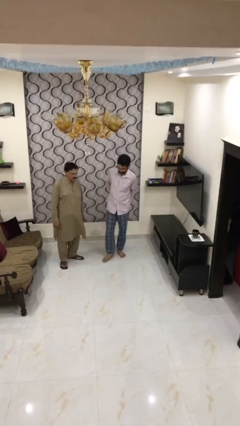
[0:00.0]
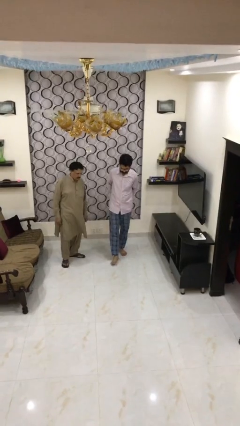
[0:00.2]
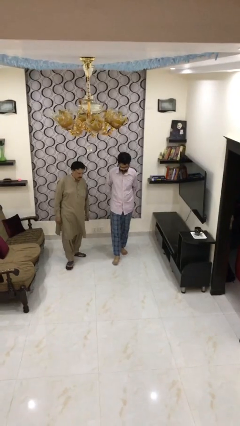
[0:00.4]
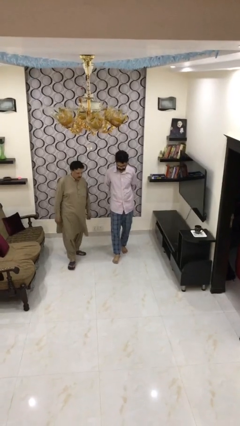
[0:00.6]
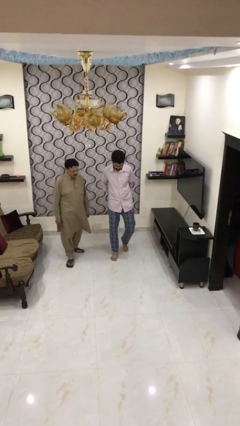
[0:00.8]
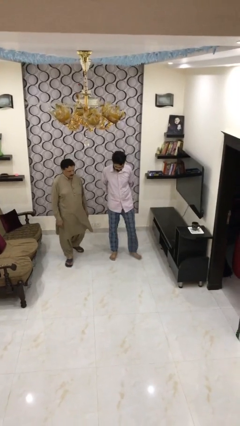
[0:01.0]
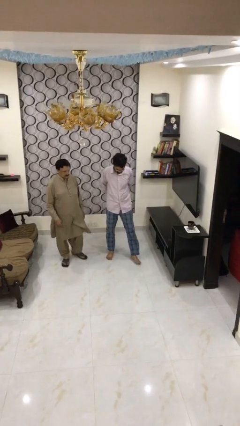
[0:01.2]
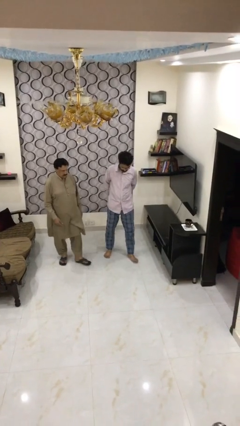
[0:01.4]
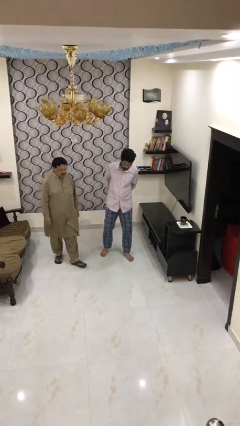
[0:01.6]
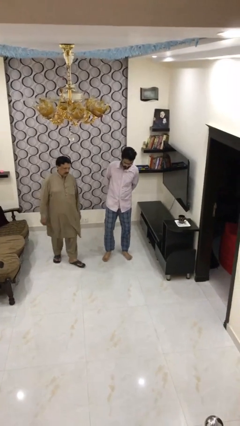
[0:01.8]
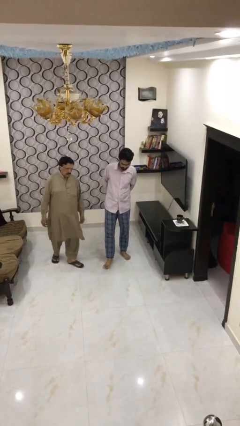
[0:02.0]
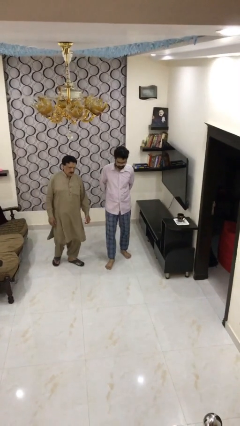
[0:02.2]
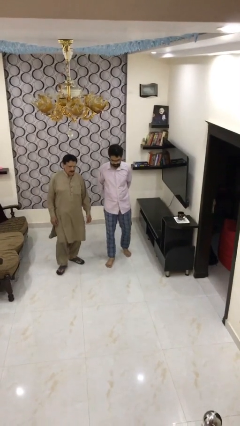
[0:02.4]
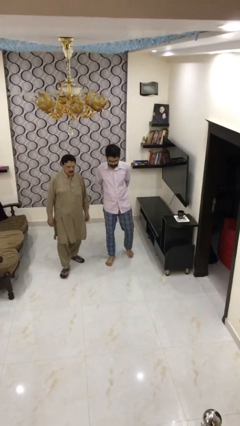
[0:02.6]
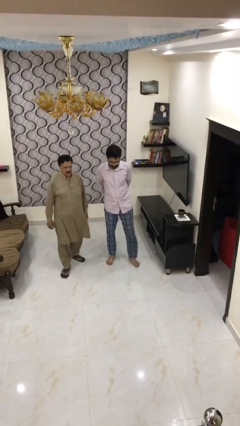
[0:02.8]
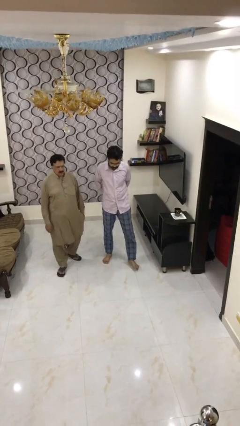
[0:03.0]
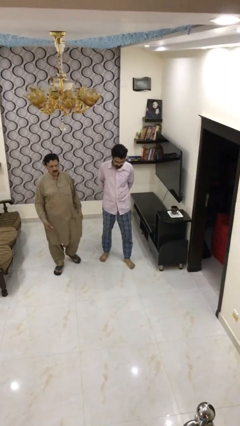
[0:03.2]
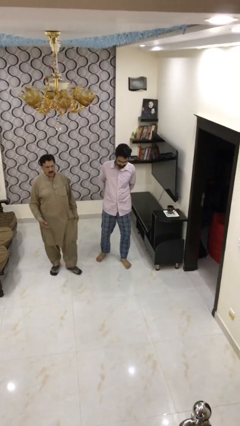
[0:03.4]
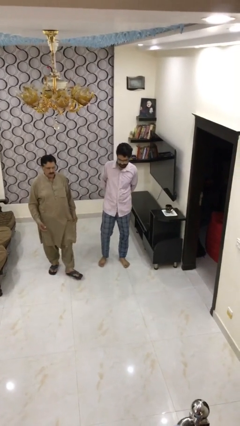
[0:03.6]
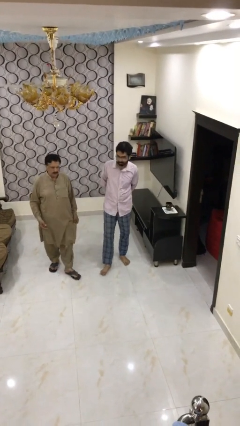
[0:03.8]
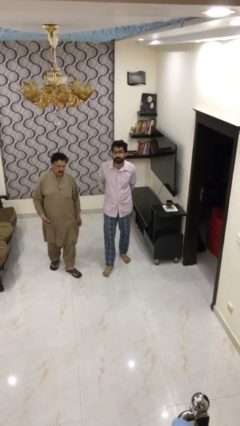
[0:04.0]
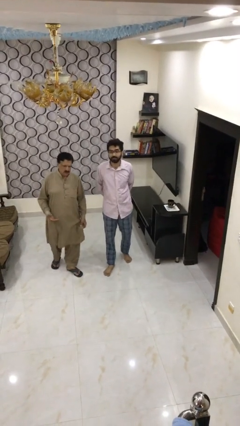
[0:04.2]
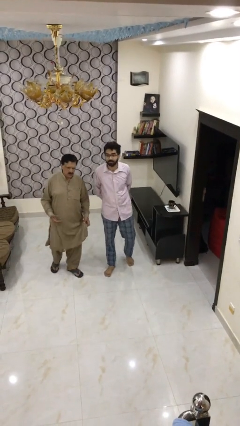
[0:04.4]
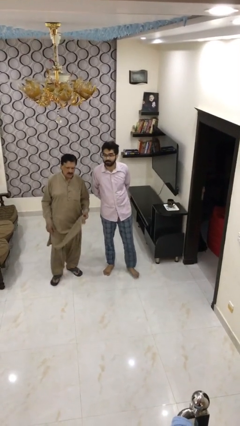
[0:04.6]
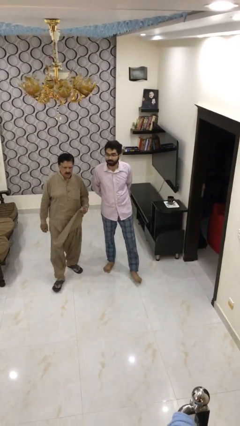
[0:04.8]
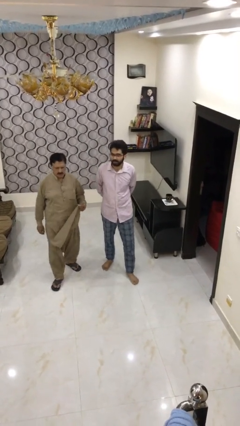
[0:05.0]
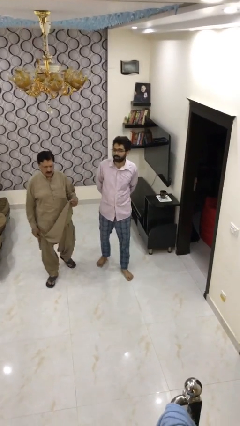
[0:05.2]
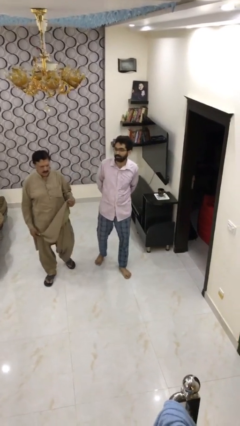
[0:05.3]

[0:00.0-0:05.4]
person talks to person

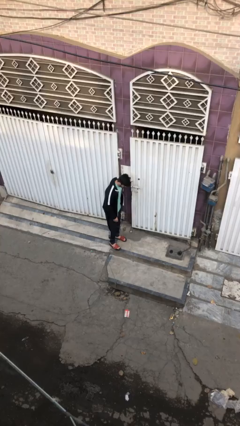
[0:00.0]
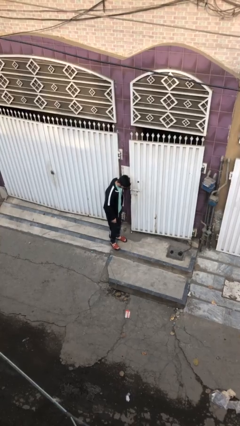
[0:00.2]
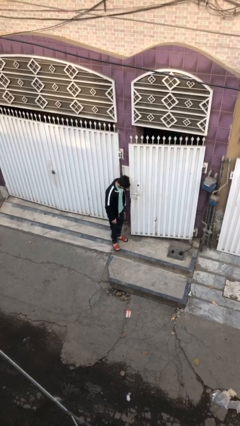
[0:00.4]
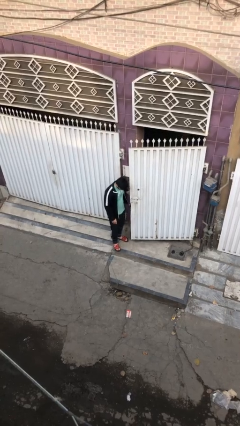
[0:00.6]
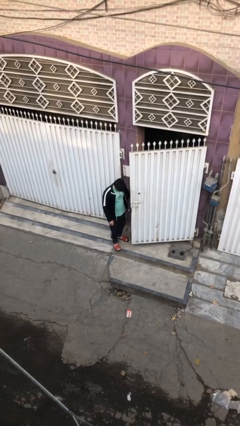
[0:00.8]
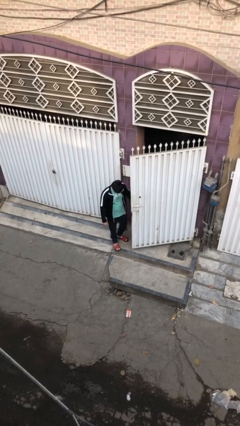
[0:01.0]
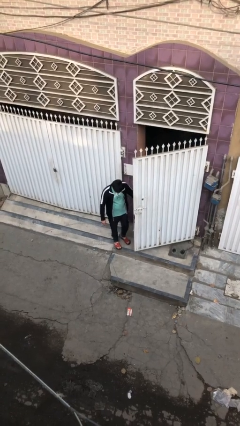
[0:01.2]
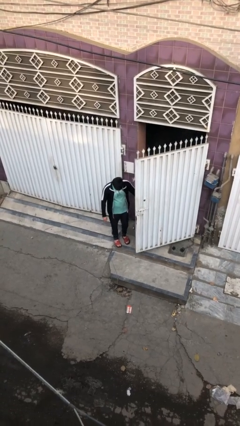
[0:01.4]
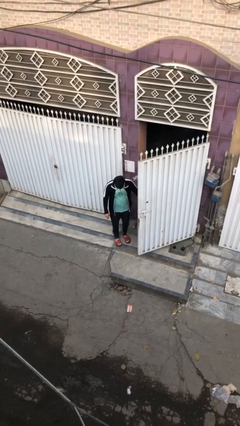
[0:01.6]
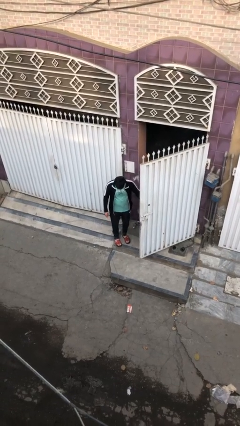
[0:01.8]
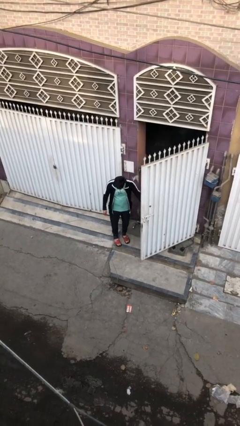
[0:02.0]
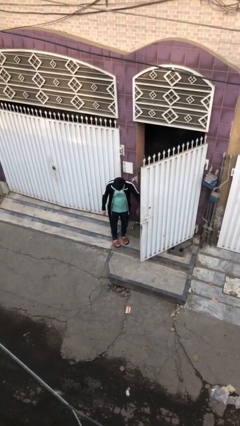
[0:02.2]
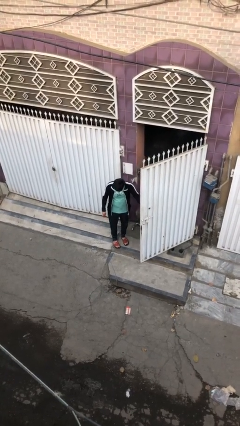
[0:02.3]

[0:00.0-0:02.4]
person opens facility door

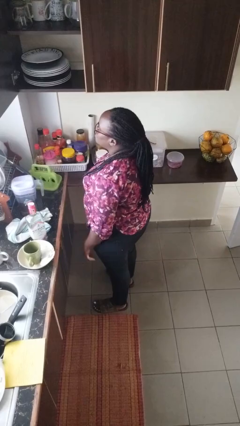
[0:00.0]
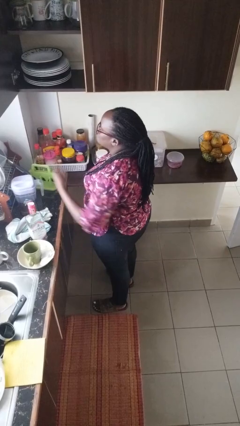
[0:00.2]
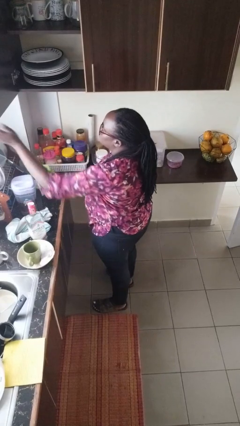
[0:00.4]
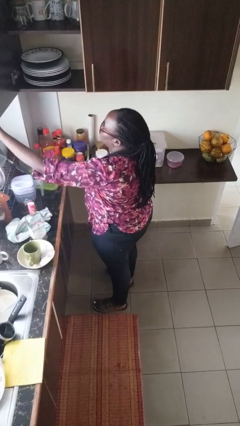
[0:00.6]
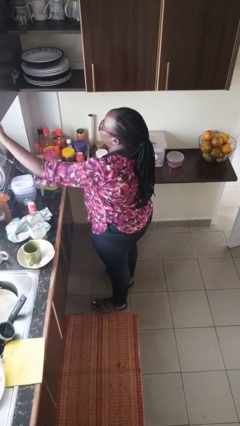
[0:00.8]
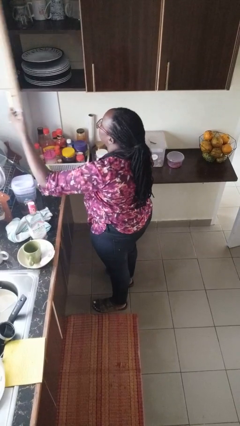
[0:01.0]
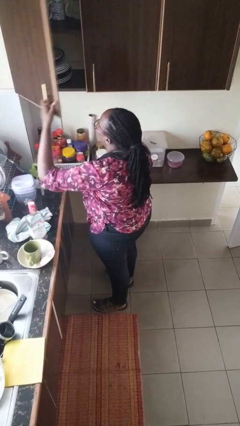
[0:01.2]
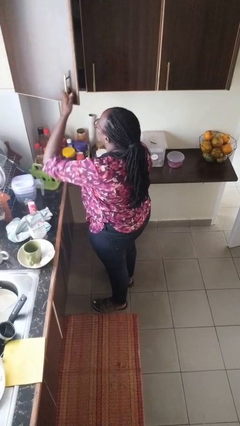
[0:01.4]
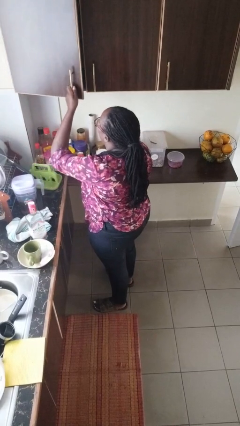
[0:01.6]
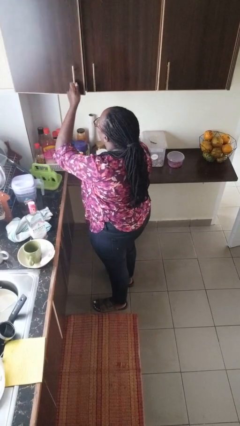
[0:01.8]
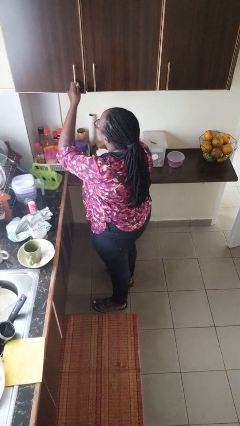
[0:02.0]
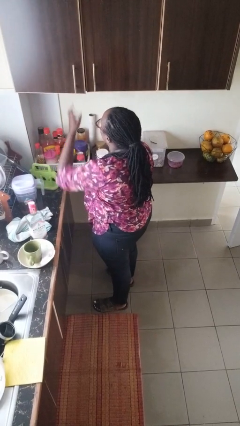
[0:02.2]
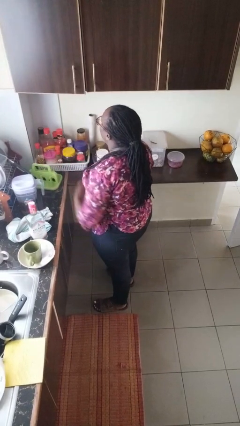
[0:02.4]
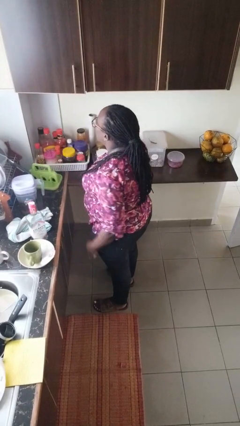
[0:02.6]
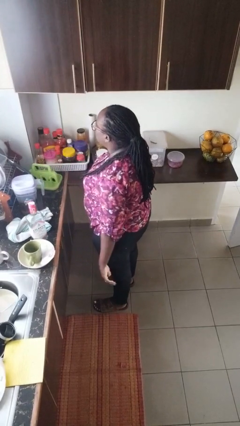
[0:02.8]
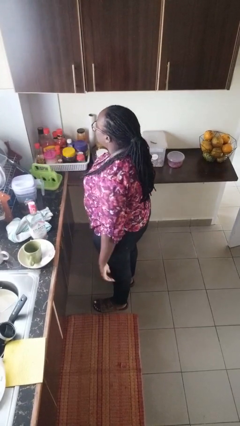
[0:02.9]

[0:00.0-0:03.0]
person closes cabinet

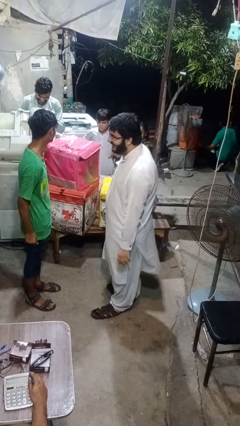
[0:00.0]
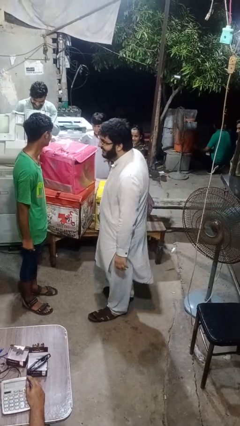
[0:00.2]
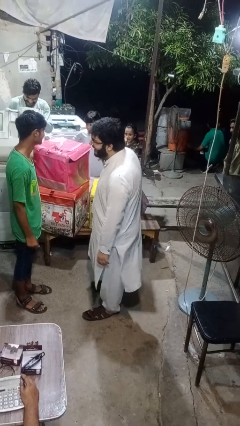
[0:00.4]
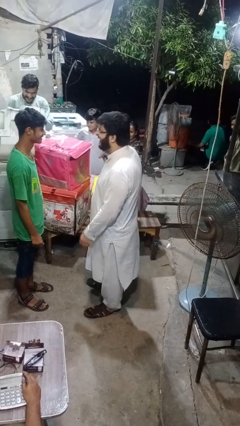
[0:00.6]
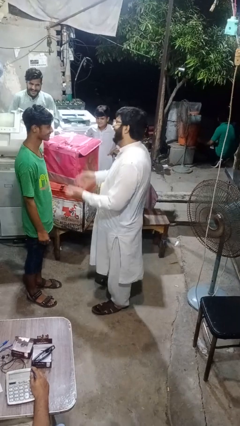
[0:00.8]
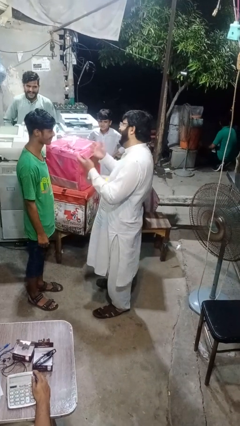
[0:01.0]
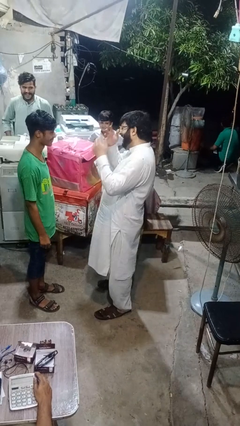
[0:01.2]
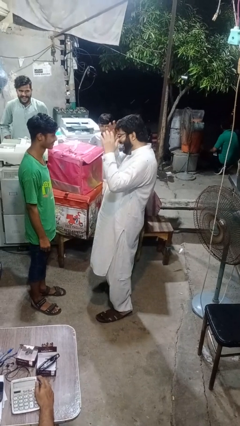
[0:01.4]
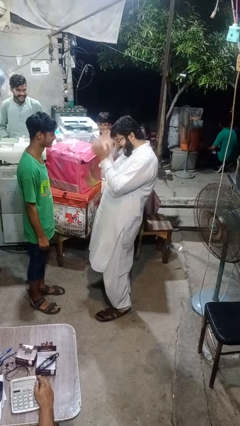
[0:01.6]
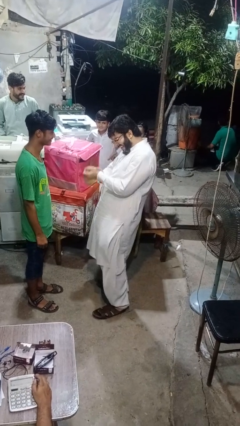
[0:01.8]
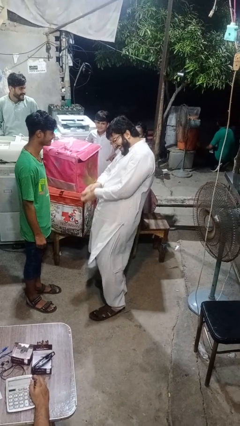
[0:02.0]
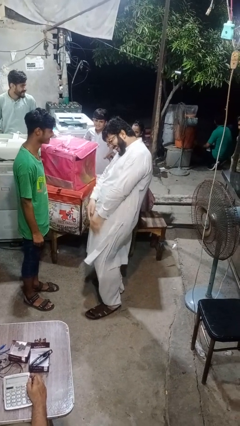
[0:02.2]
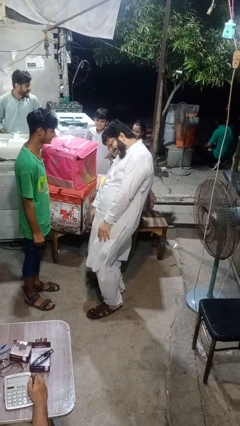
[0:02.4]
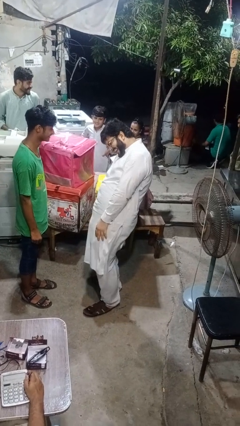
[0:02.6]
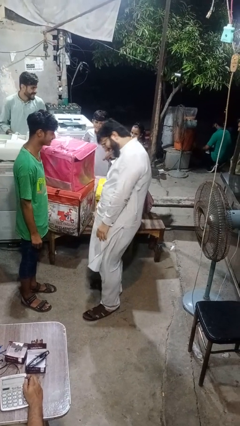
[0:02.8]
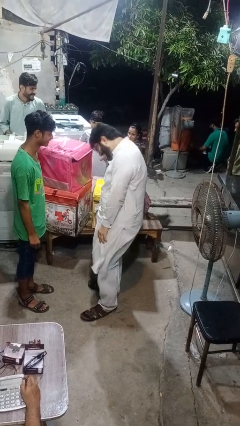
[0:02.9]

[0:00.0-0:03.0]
person laughs with person

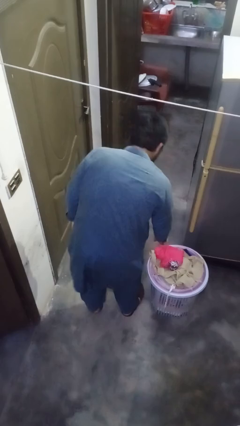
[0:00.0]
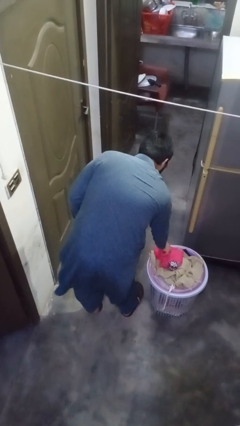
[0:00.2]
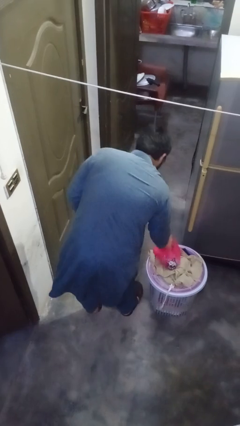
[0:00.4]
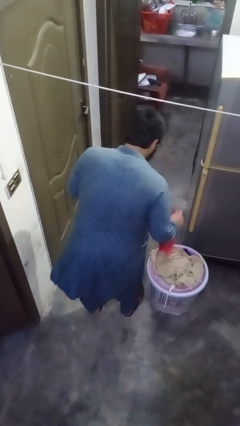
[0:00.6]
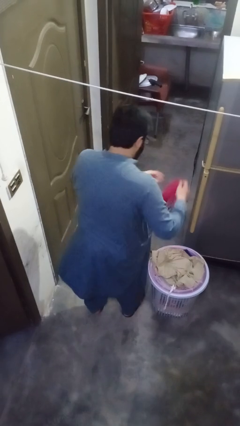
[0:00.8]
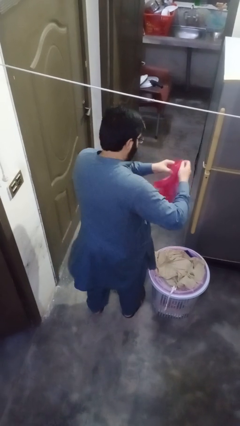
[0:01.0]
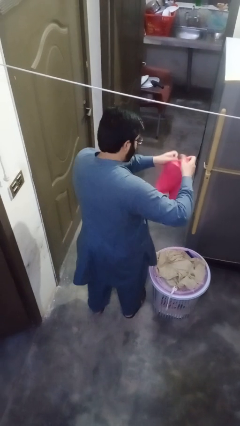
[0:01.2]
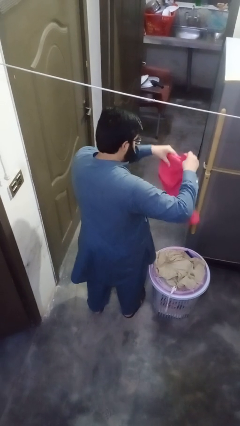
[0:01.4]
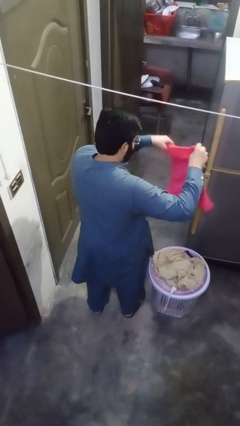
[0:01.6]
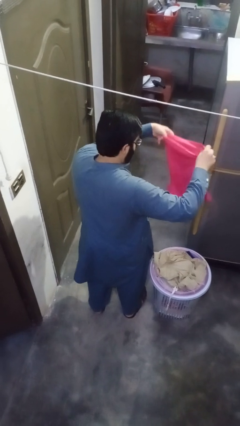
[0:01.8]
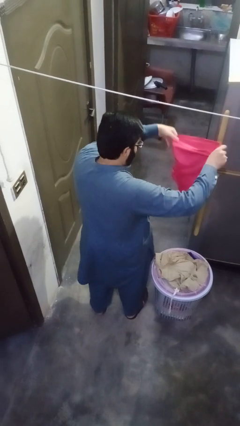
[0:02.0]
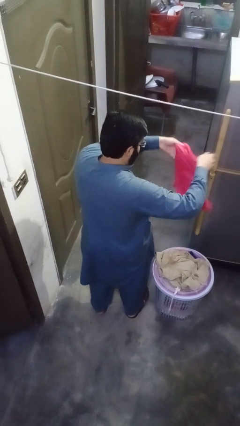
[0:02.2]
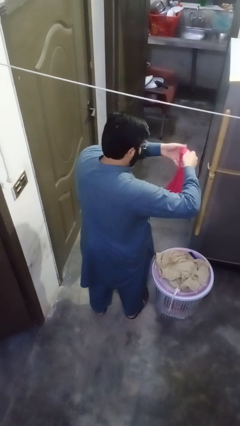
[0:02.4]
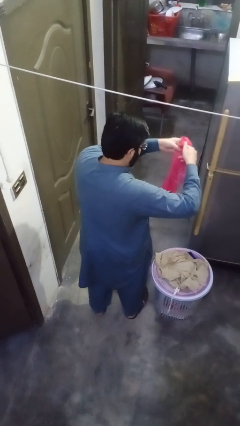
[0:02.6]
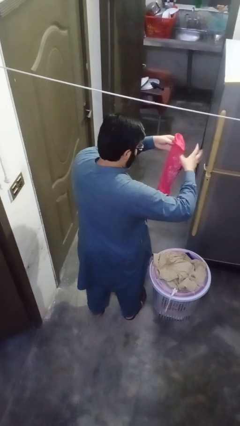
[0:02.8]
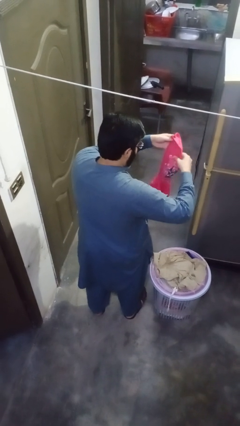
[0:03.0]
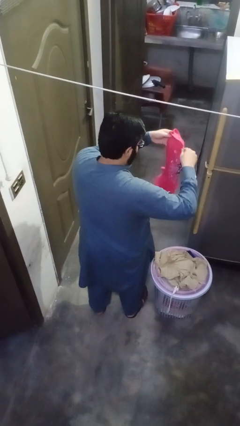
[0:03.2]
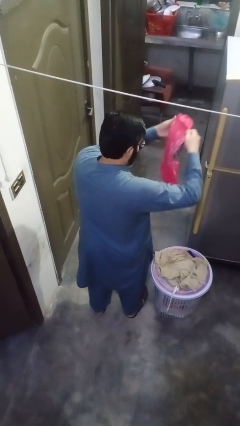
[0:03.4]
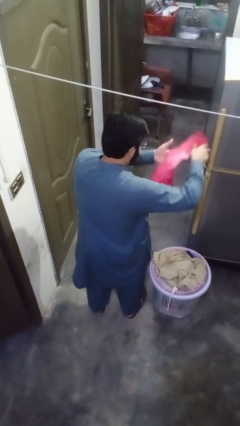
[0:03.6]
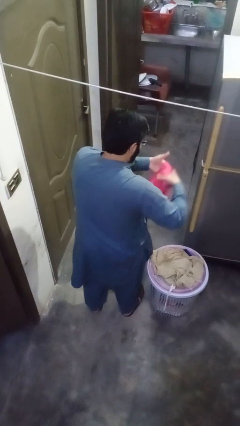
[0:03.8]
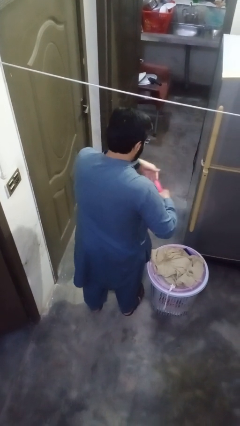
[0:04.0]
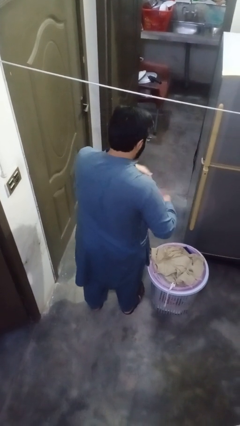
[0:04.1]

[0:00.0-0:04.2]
person folds shirt
